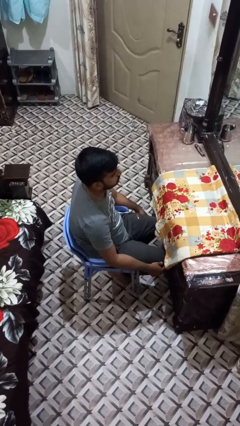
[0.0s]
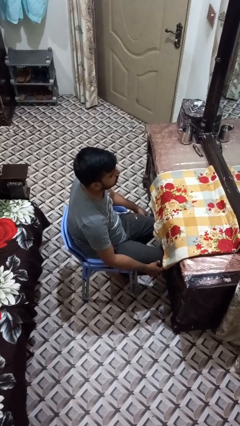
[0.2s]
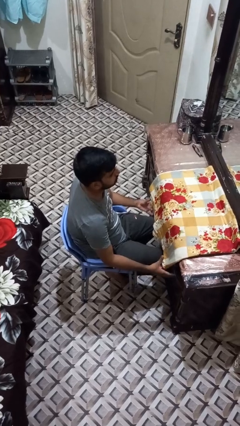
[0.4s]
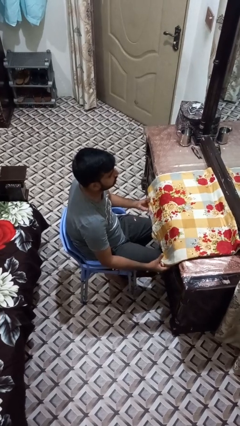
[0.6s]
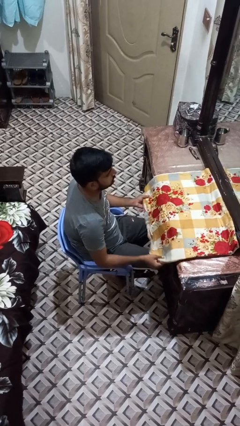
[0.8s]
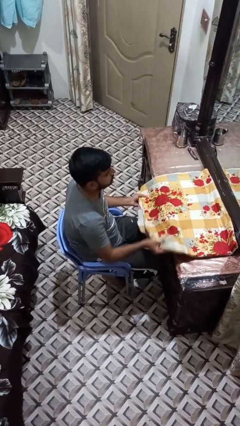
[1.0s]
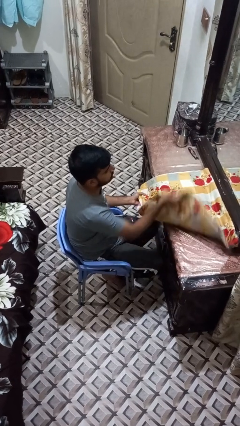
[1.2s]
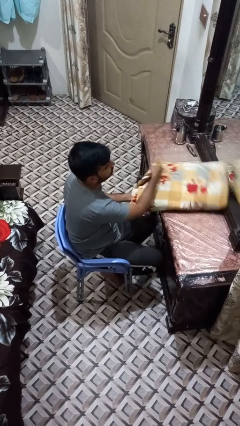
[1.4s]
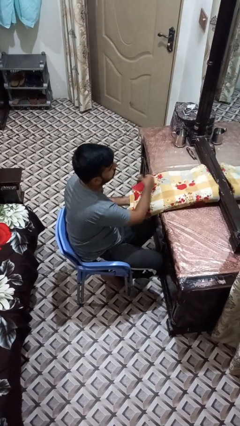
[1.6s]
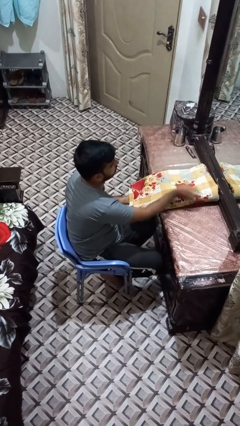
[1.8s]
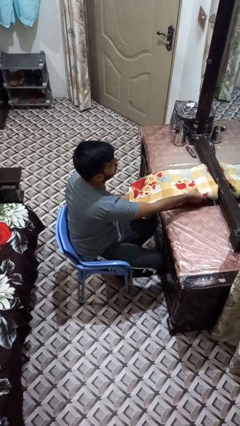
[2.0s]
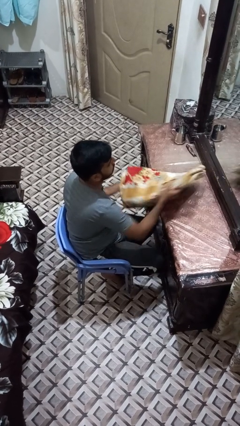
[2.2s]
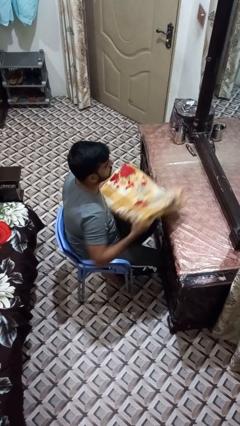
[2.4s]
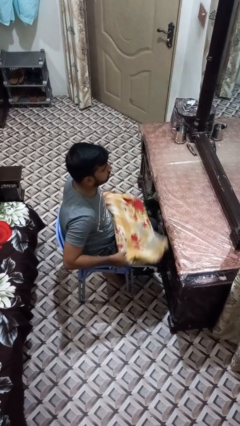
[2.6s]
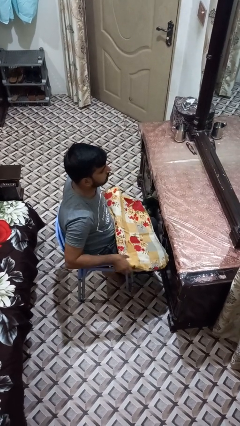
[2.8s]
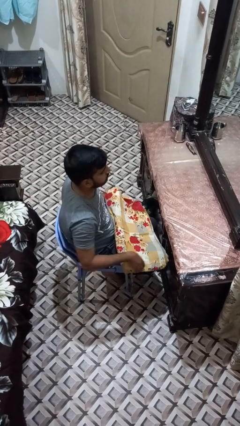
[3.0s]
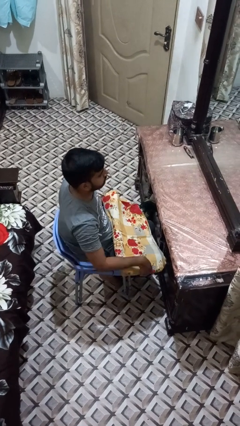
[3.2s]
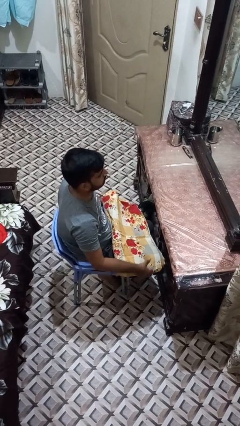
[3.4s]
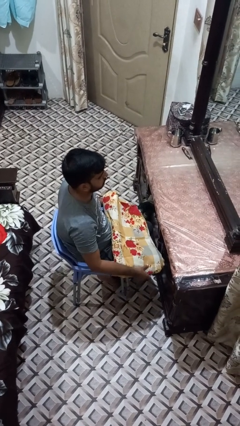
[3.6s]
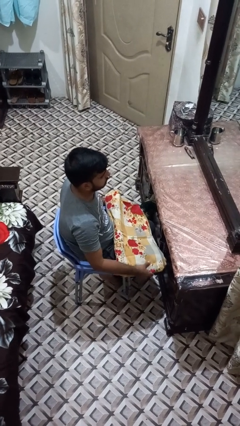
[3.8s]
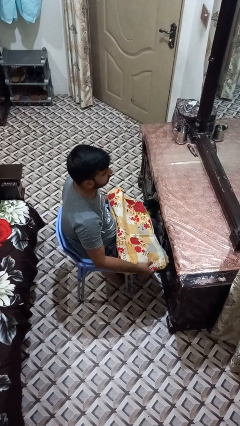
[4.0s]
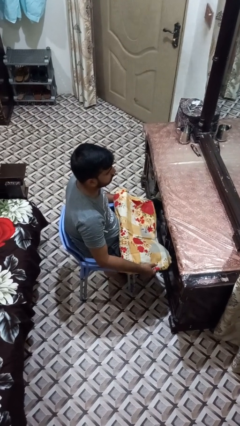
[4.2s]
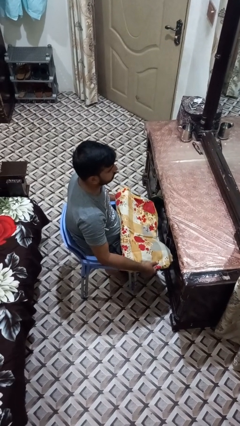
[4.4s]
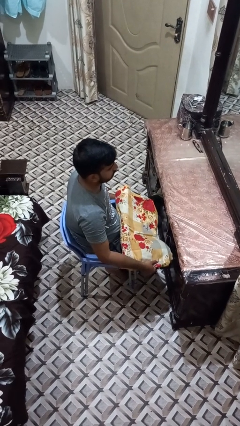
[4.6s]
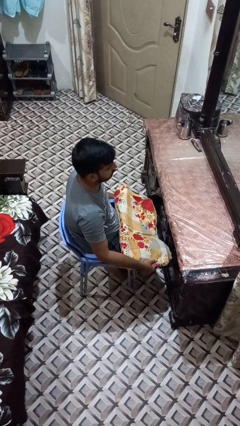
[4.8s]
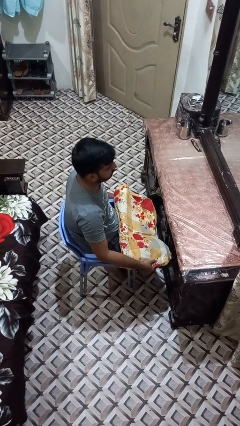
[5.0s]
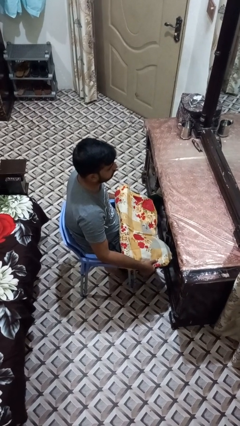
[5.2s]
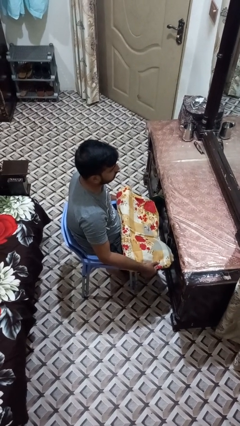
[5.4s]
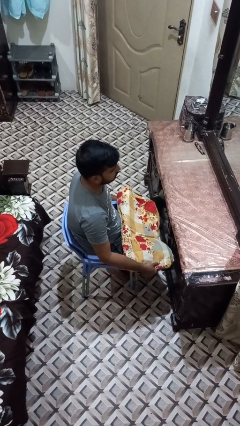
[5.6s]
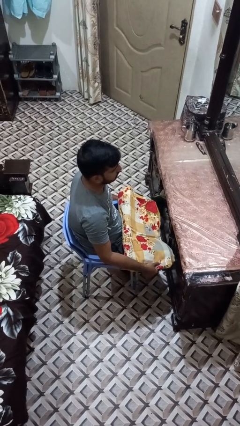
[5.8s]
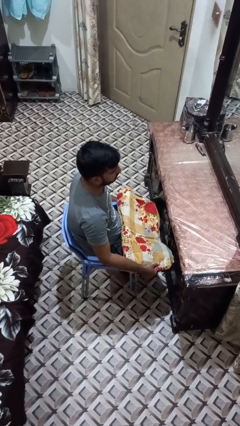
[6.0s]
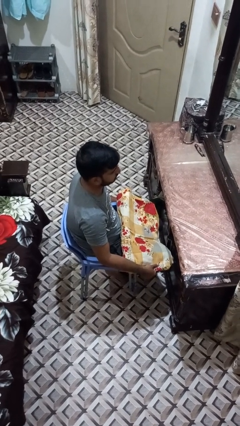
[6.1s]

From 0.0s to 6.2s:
person folds tablecloth

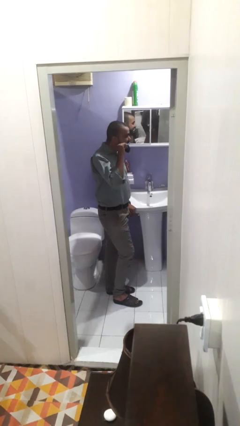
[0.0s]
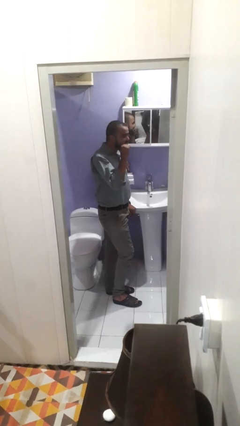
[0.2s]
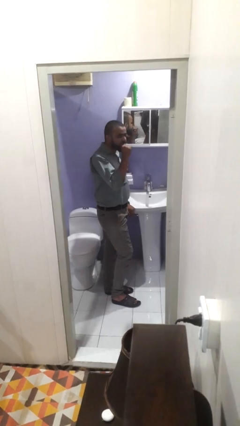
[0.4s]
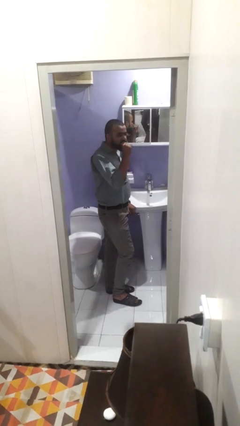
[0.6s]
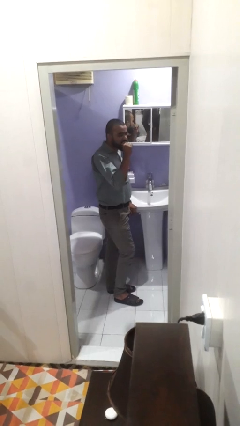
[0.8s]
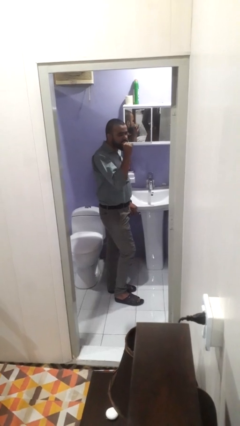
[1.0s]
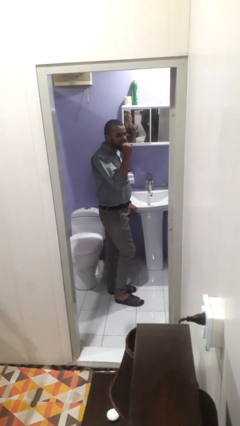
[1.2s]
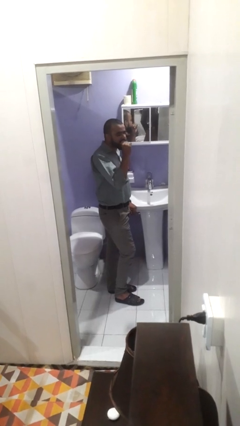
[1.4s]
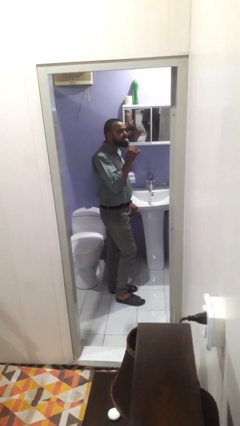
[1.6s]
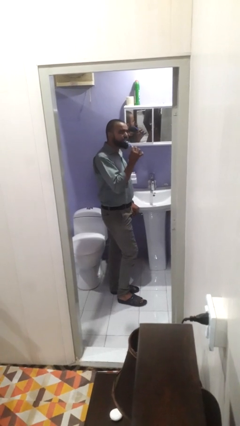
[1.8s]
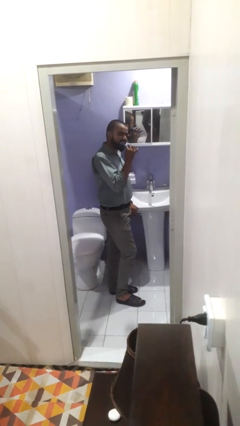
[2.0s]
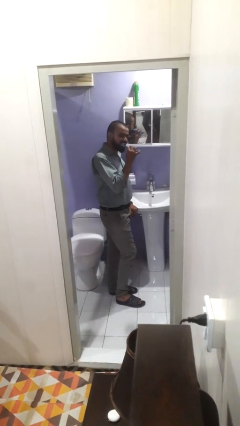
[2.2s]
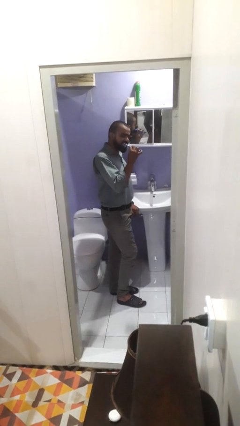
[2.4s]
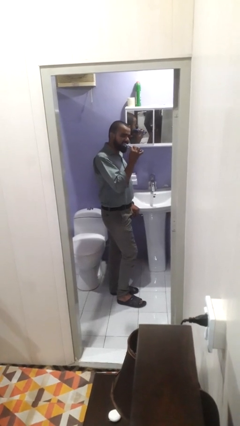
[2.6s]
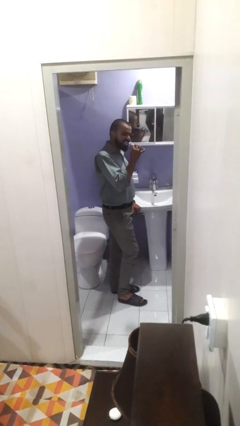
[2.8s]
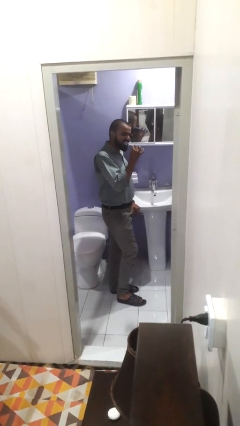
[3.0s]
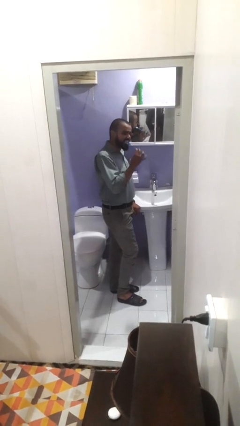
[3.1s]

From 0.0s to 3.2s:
person brushes teeth

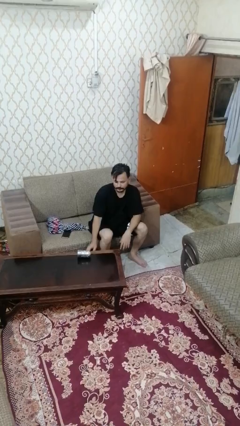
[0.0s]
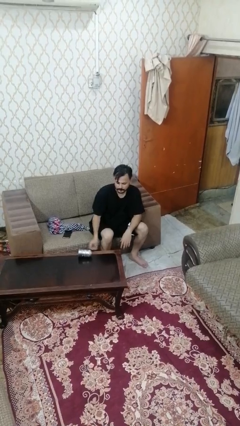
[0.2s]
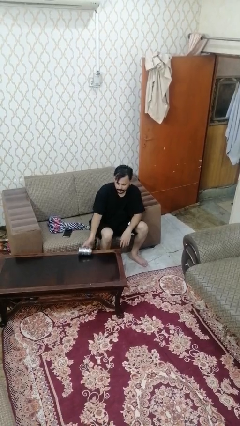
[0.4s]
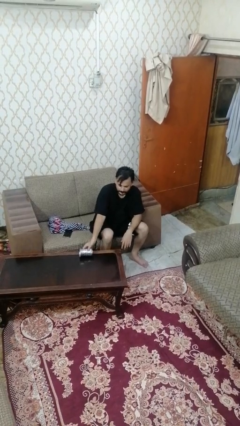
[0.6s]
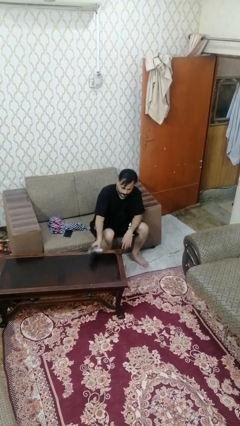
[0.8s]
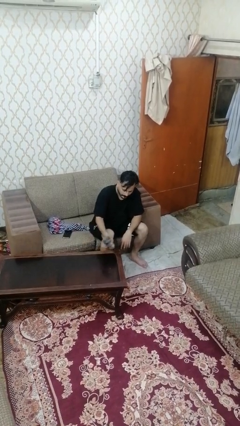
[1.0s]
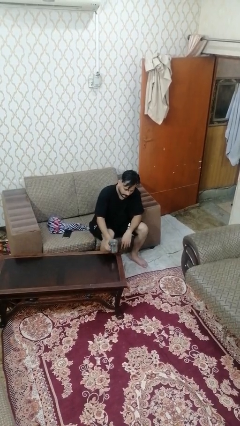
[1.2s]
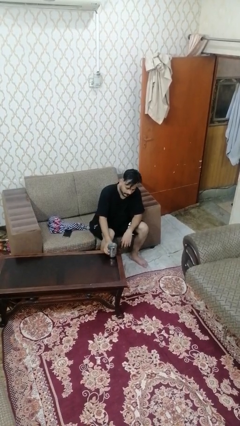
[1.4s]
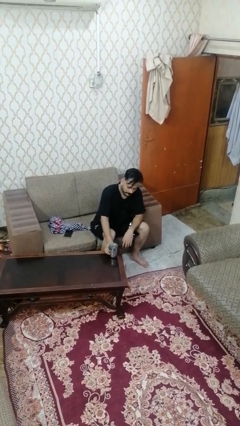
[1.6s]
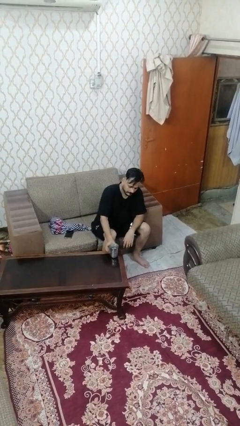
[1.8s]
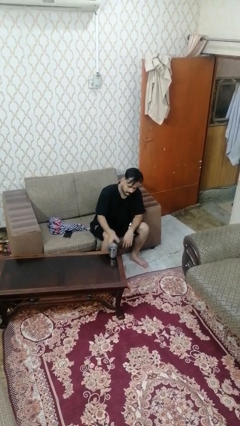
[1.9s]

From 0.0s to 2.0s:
person sets upright glass

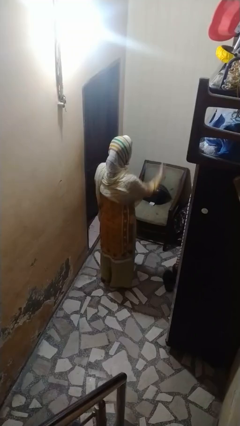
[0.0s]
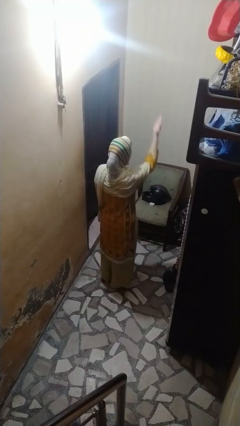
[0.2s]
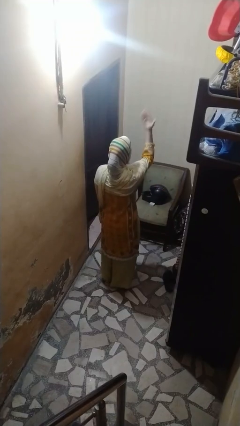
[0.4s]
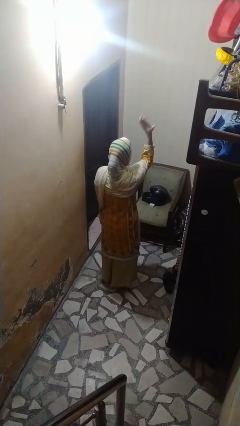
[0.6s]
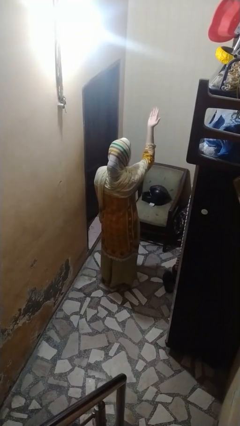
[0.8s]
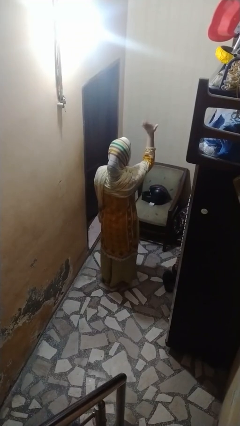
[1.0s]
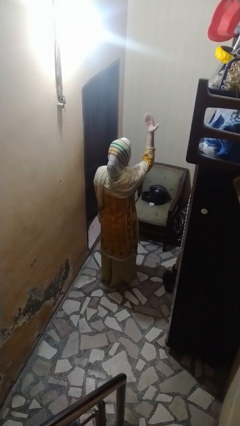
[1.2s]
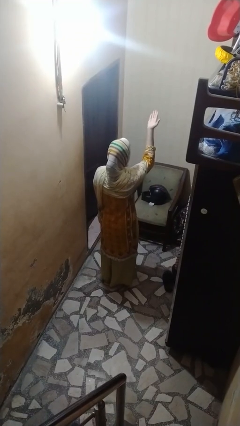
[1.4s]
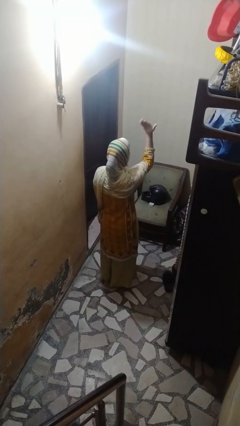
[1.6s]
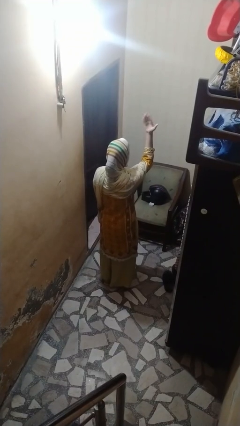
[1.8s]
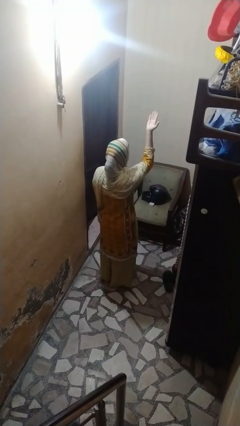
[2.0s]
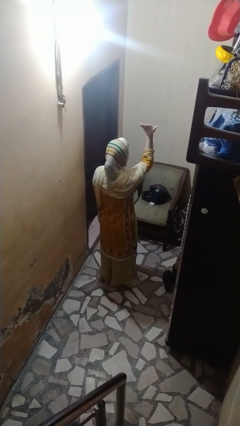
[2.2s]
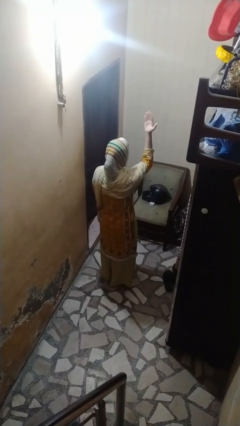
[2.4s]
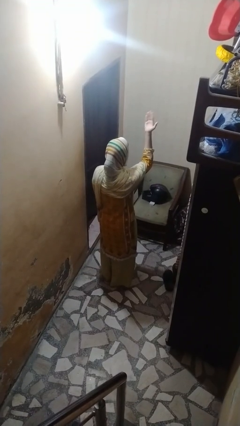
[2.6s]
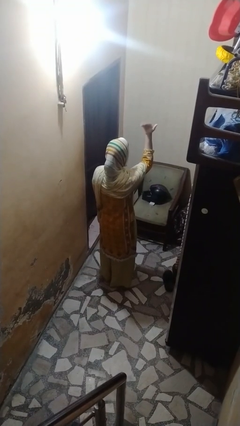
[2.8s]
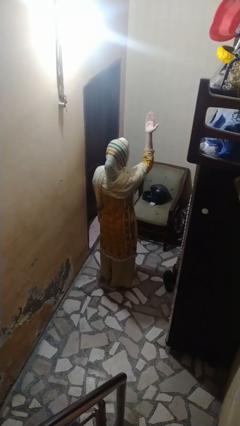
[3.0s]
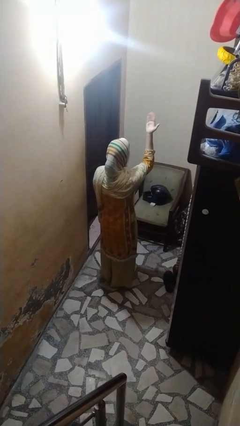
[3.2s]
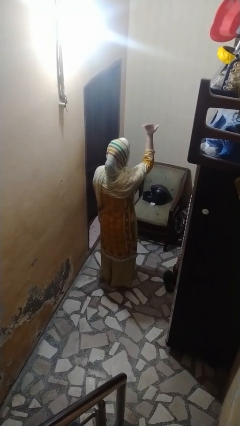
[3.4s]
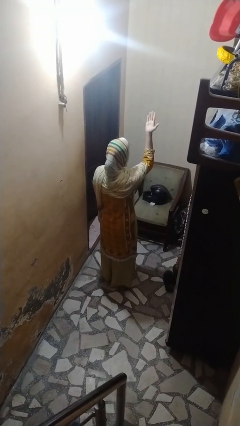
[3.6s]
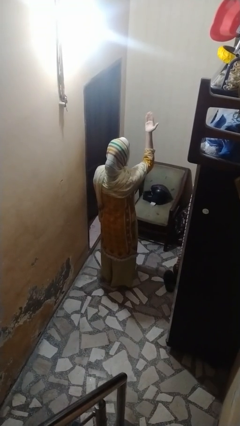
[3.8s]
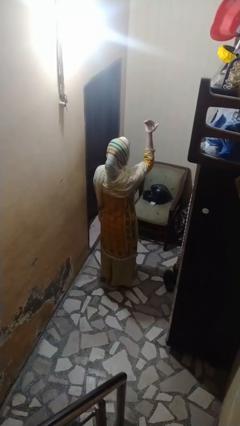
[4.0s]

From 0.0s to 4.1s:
person gestures come here

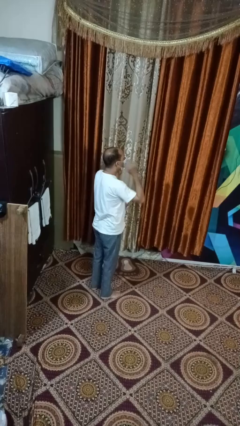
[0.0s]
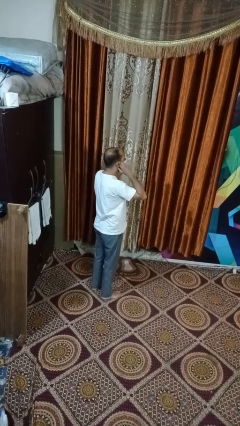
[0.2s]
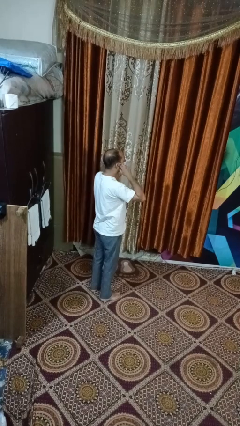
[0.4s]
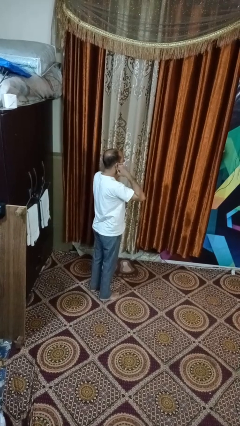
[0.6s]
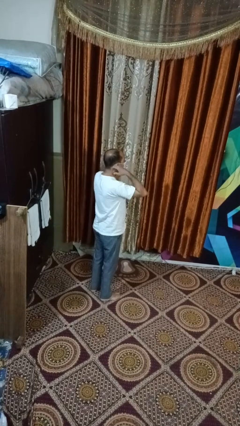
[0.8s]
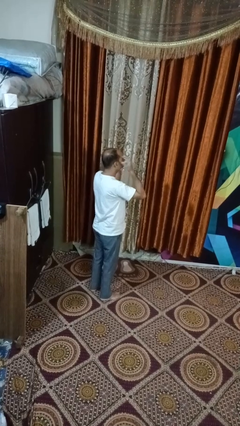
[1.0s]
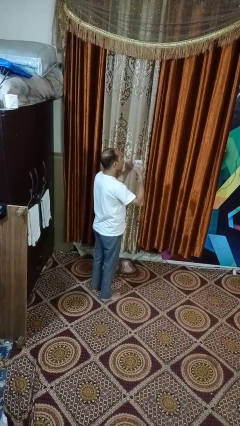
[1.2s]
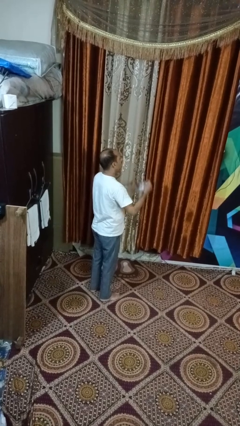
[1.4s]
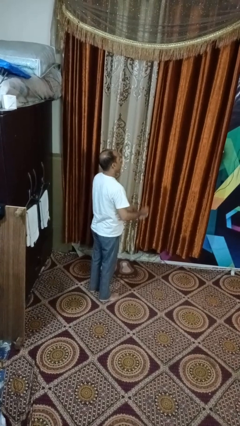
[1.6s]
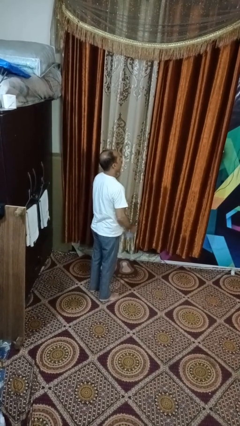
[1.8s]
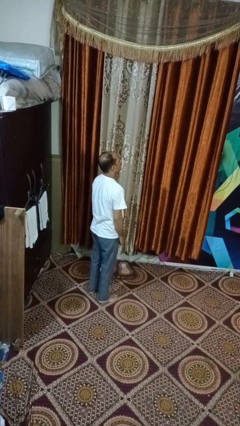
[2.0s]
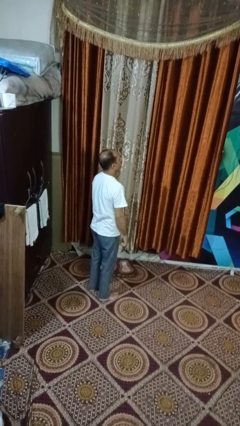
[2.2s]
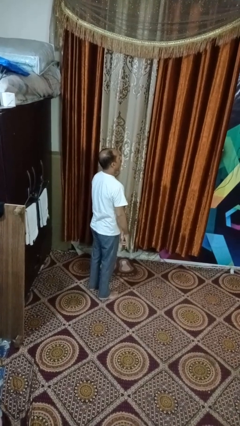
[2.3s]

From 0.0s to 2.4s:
person takes off facemask
